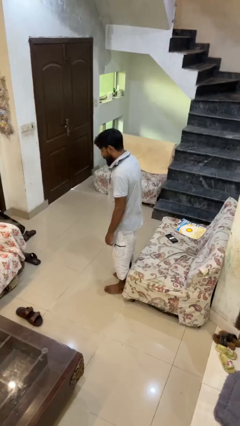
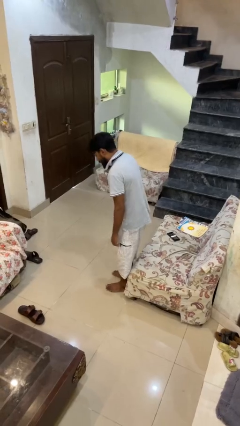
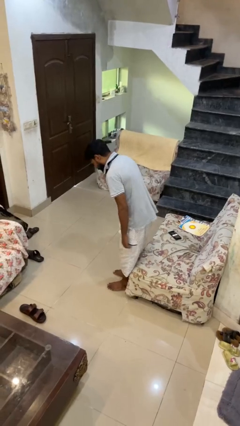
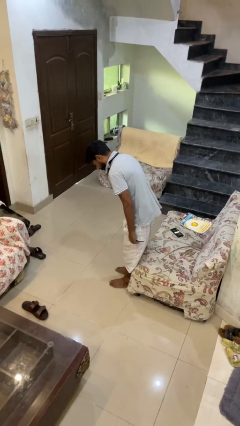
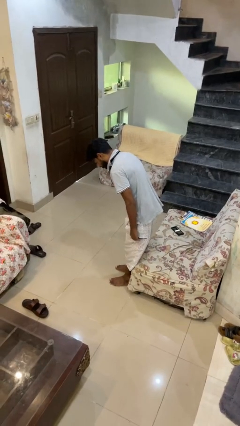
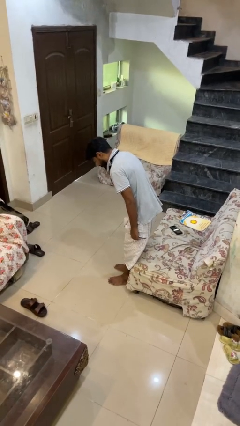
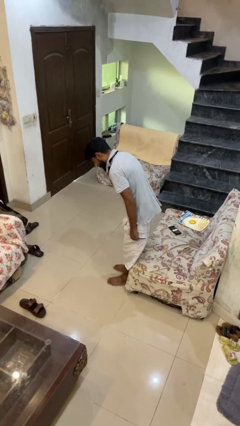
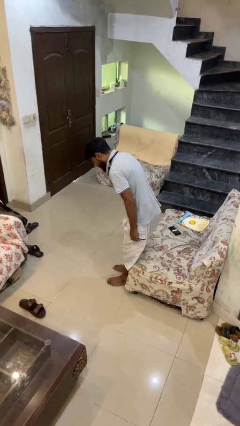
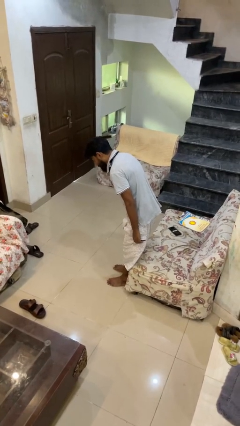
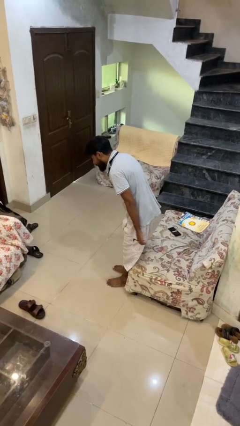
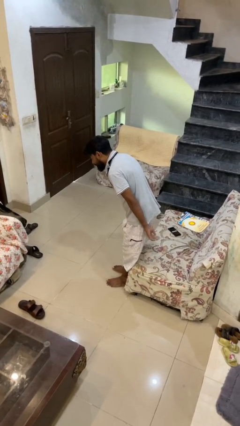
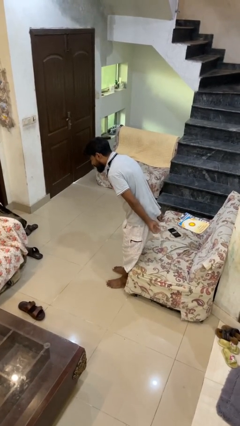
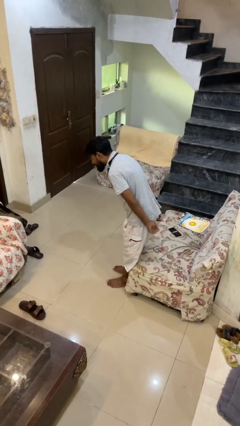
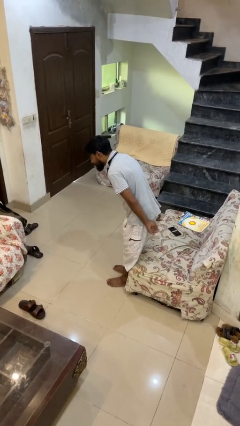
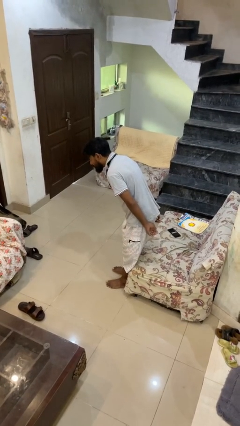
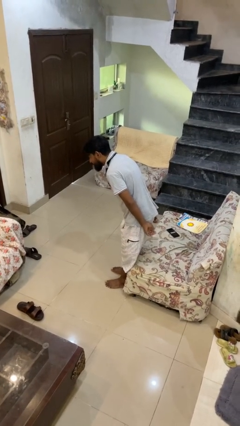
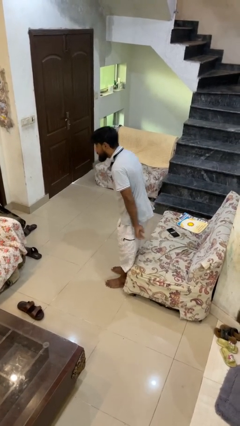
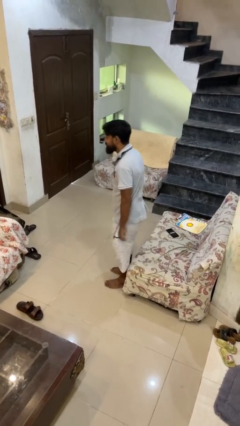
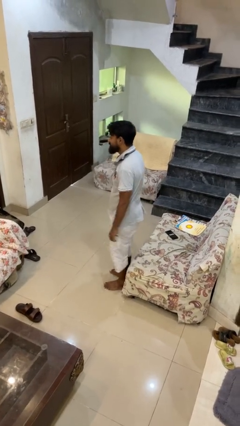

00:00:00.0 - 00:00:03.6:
person bows

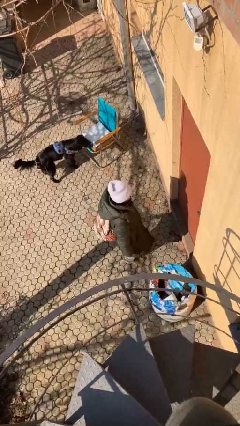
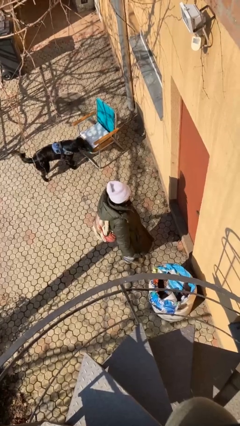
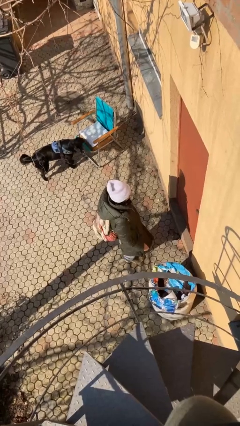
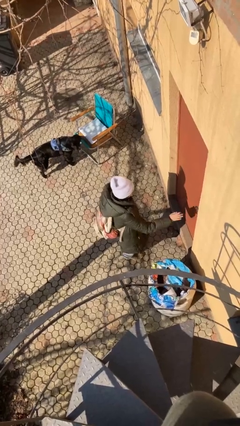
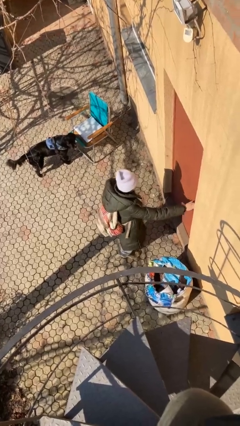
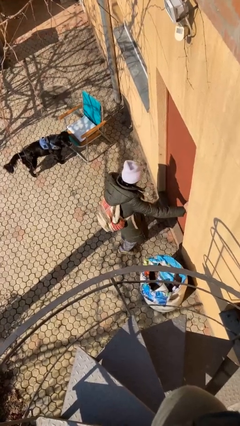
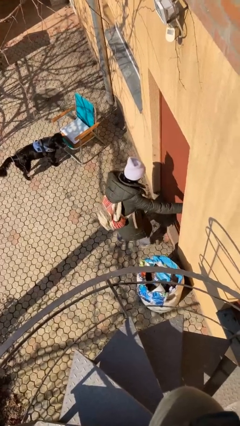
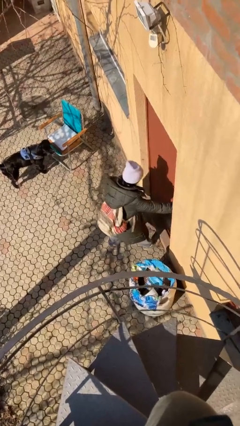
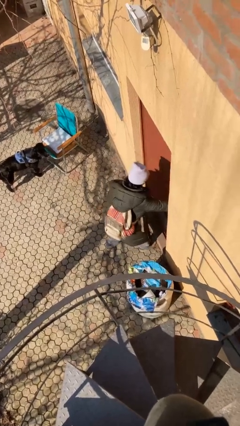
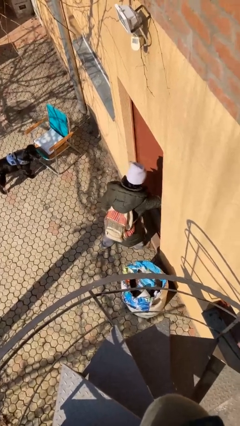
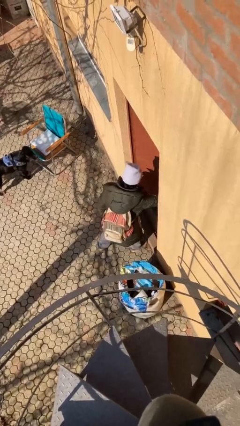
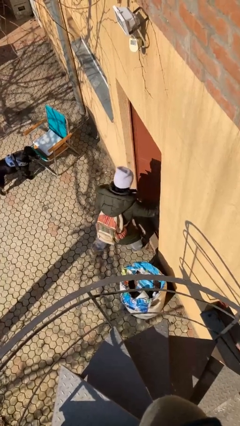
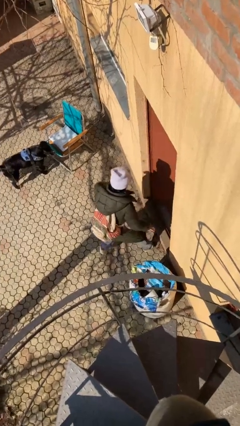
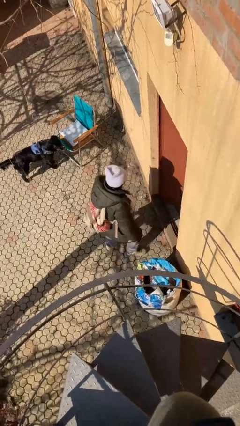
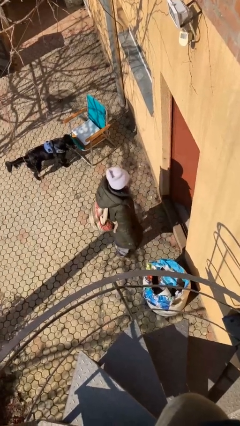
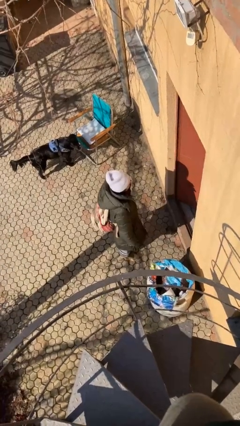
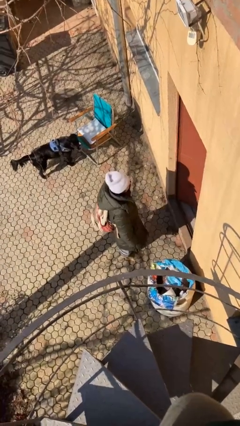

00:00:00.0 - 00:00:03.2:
person opens facility door

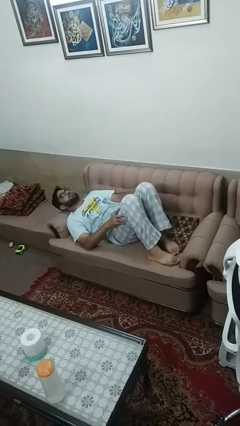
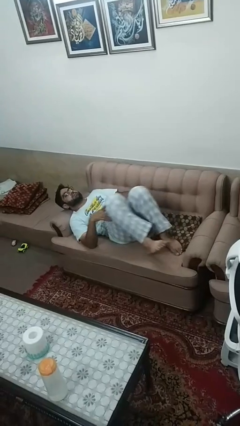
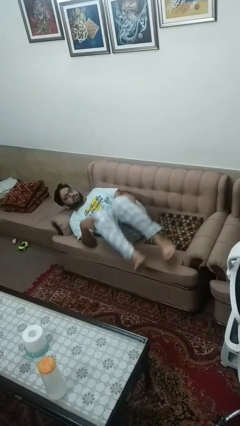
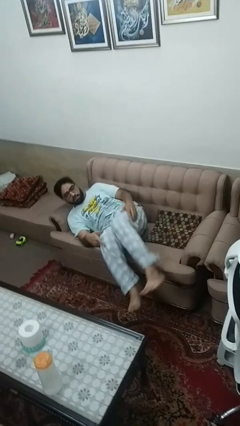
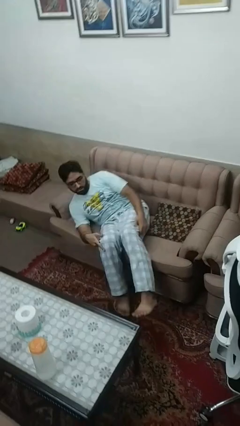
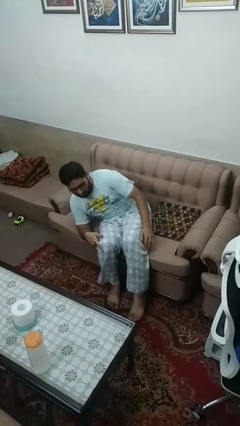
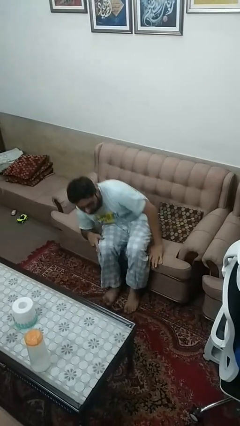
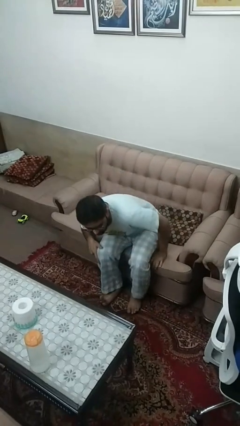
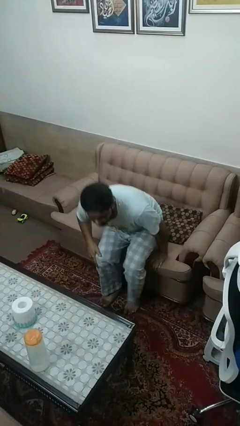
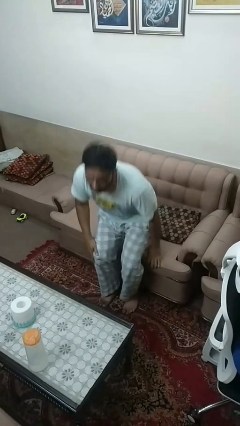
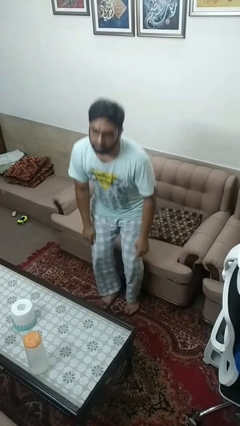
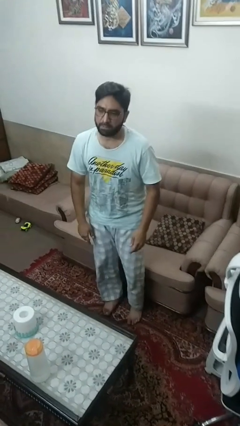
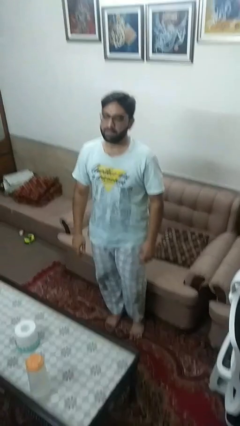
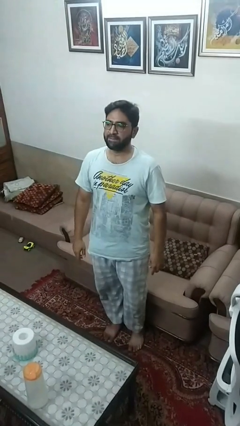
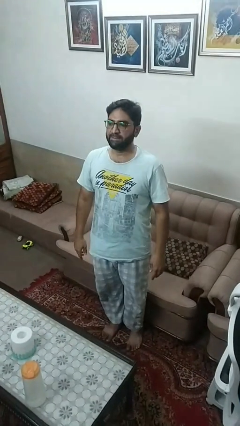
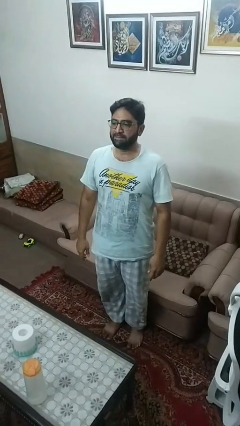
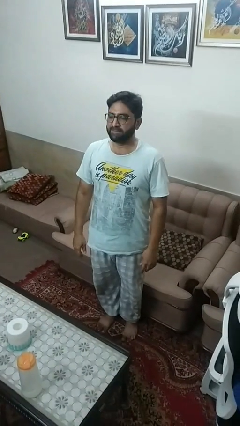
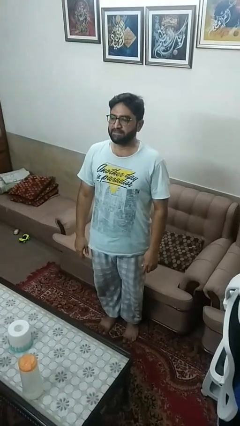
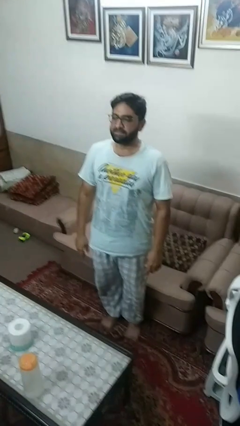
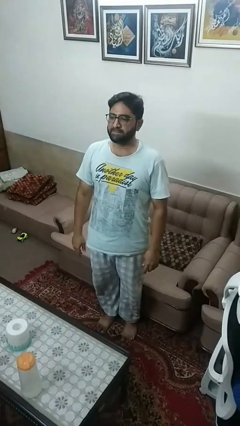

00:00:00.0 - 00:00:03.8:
person stands up

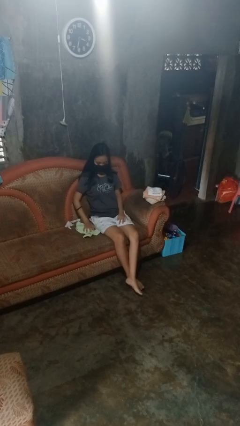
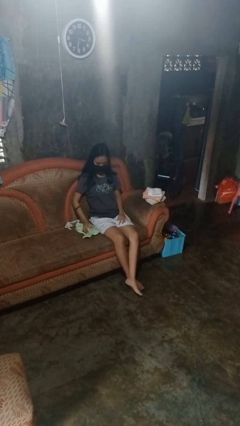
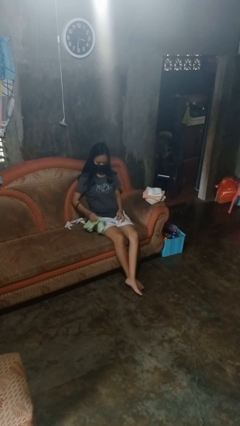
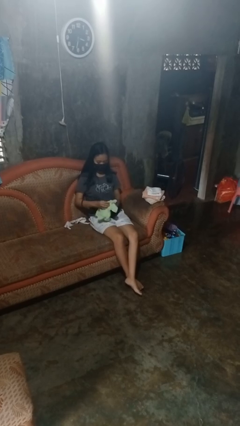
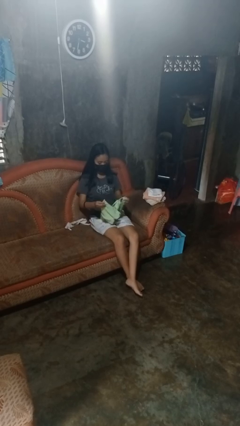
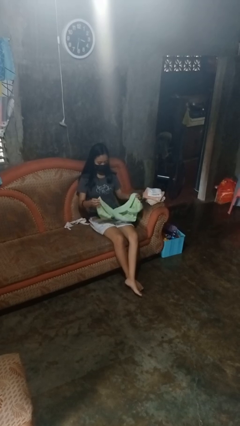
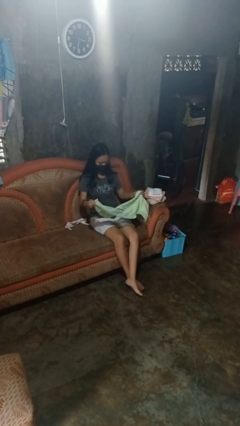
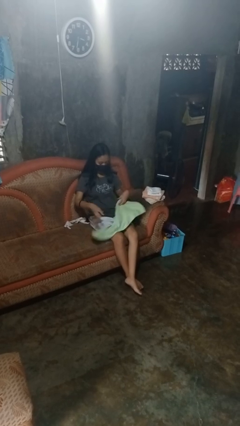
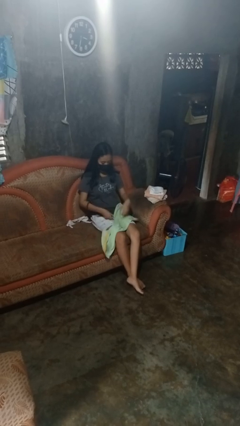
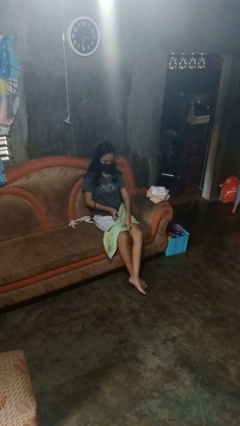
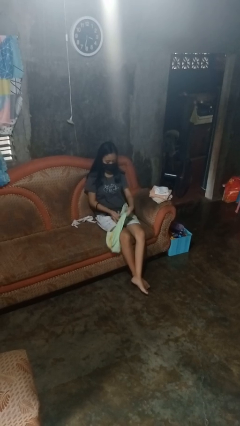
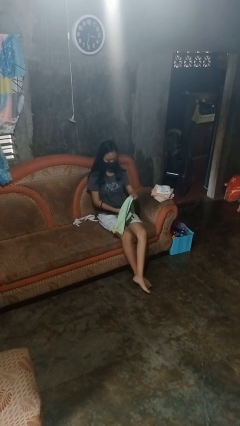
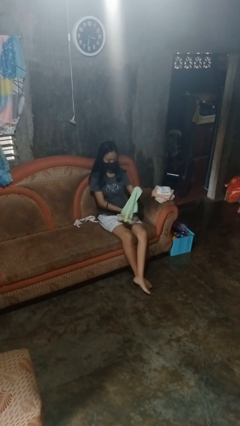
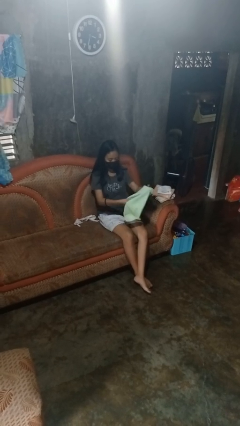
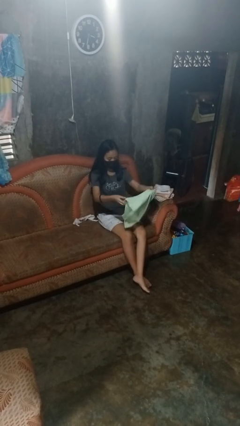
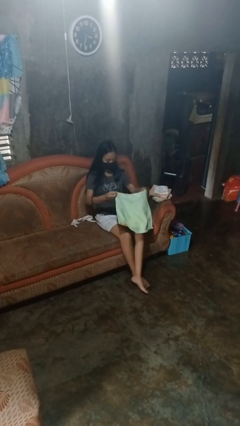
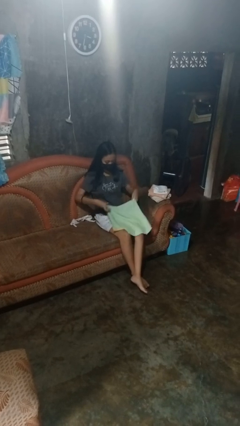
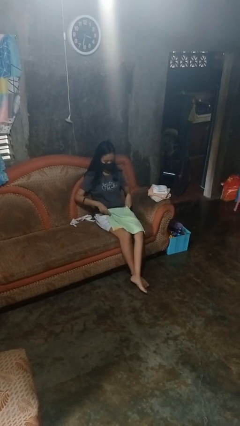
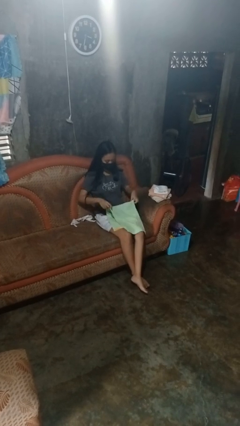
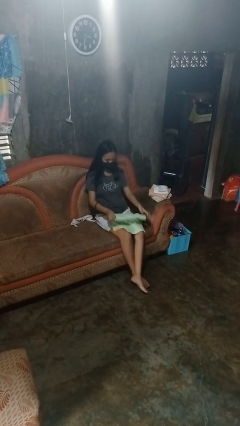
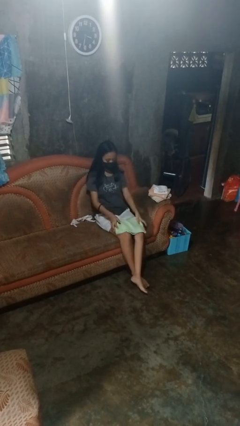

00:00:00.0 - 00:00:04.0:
person folds towel

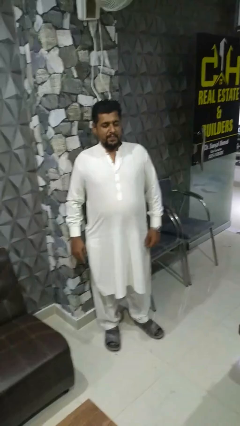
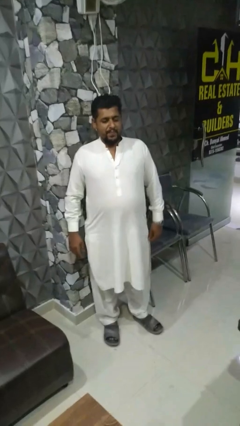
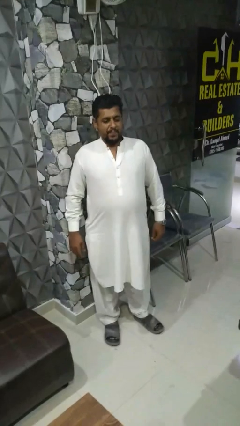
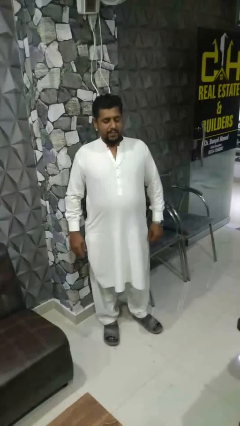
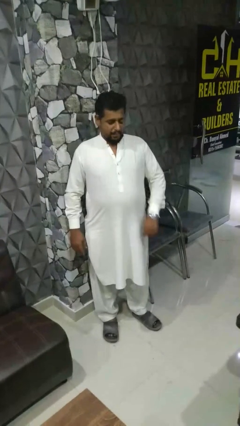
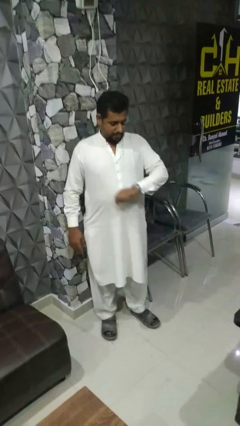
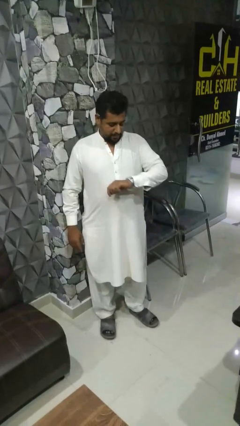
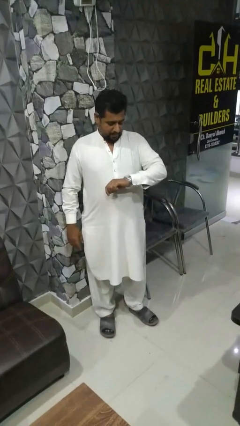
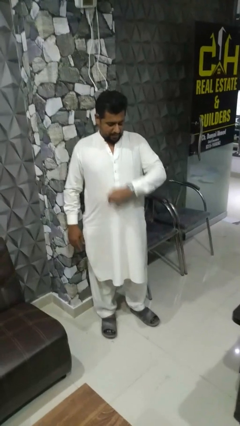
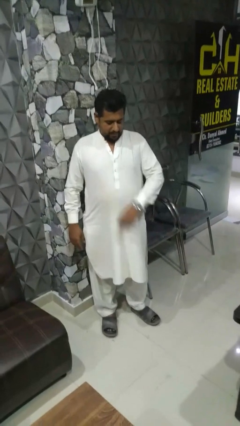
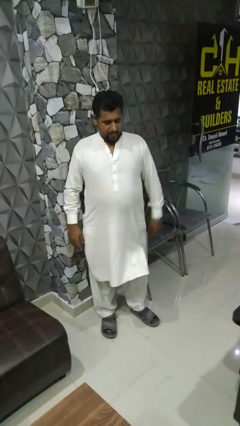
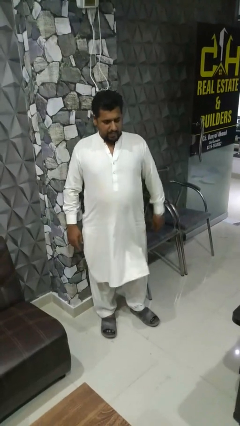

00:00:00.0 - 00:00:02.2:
person looks at wristwatch

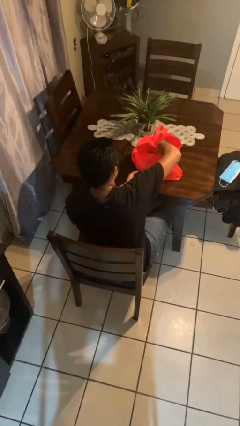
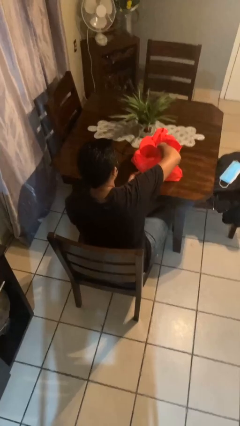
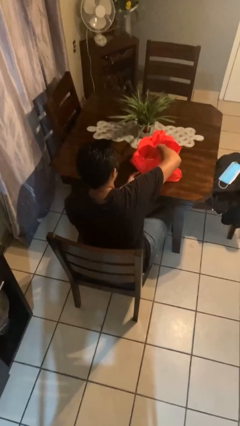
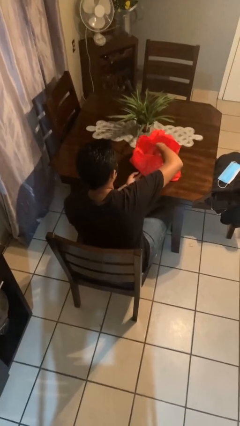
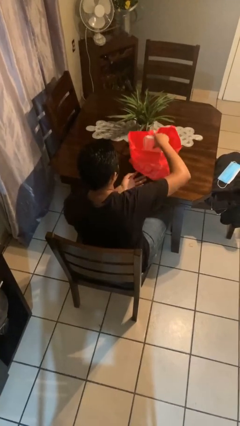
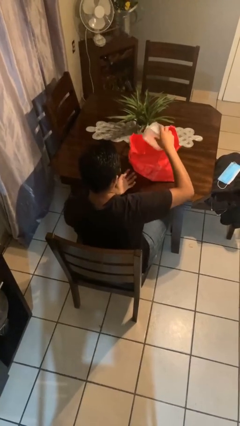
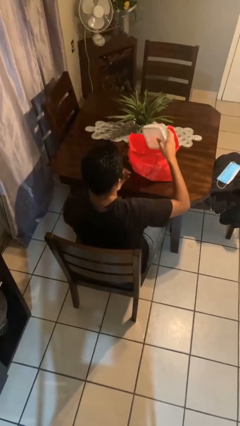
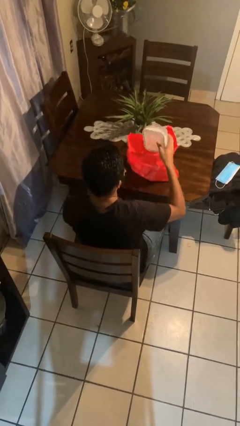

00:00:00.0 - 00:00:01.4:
person takes object from bag
